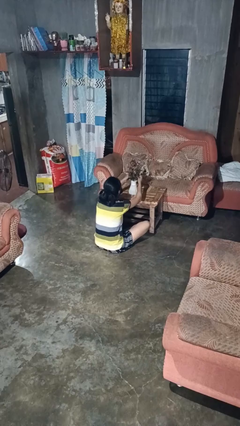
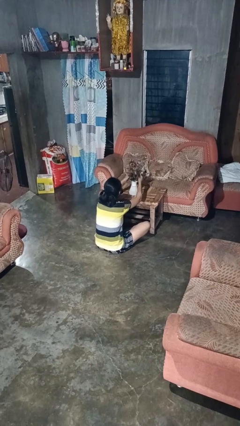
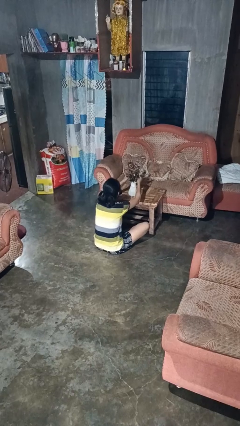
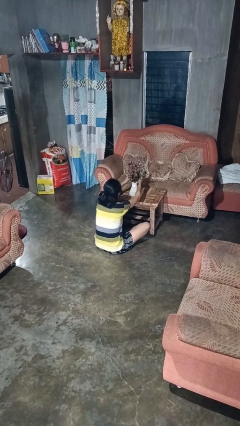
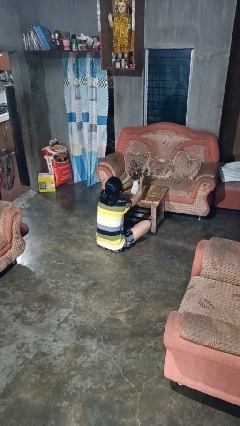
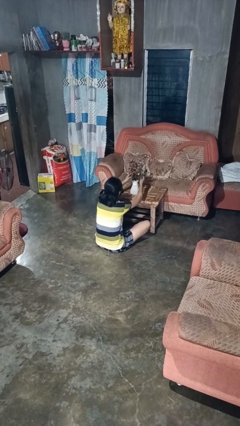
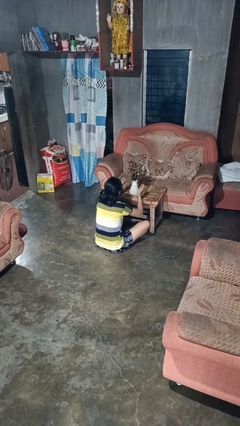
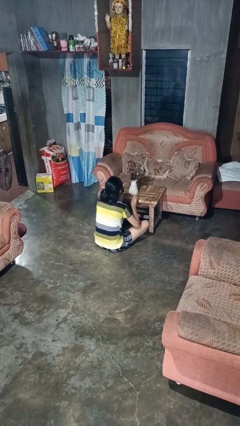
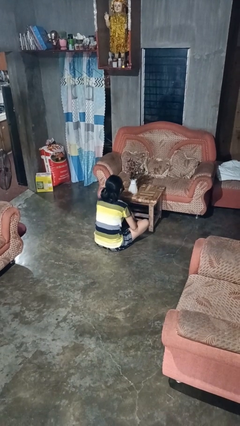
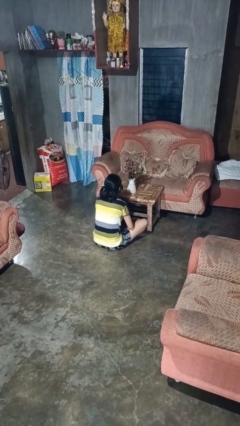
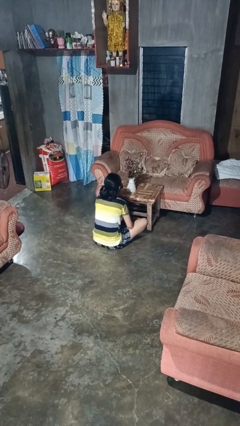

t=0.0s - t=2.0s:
person arranges flowers in vase

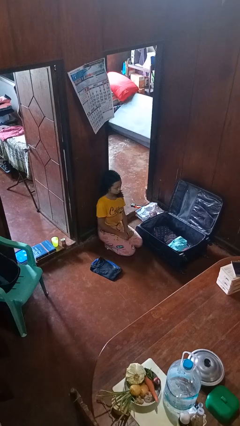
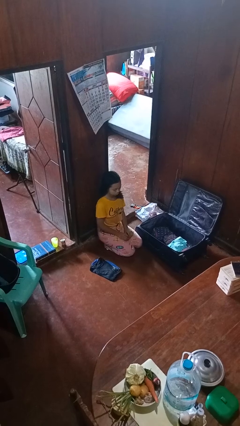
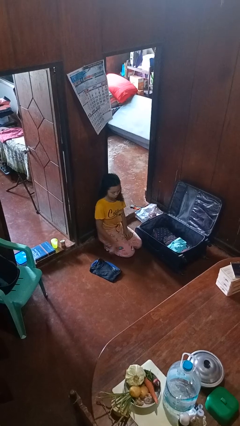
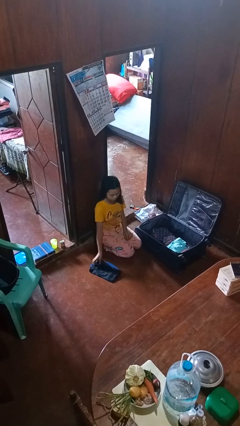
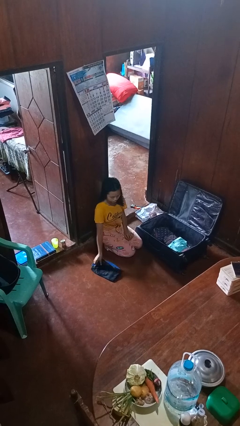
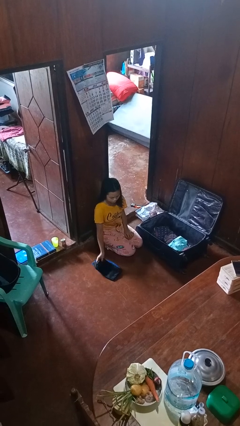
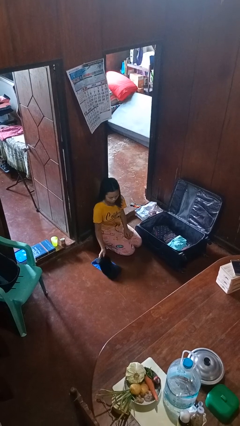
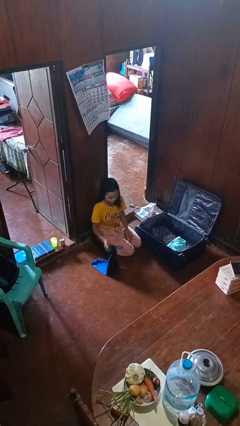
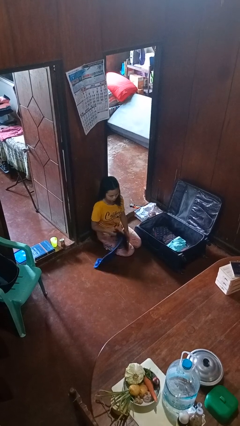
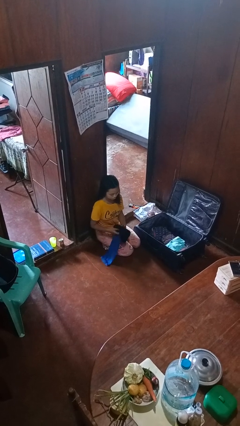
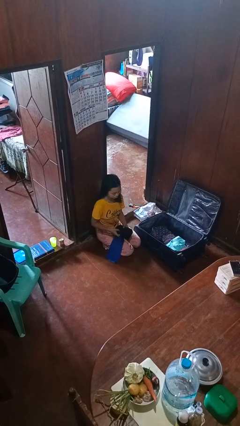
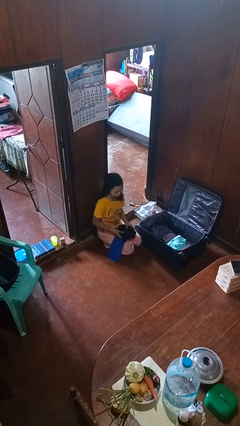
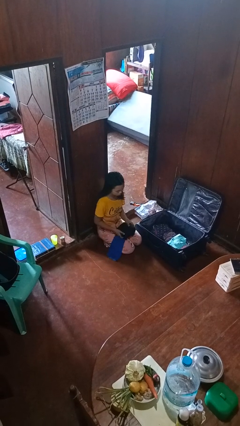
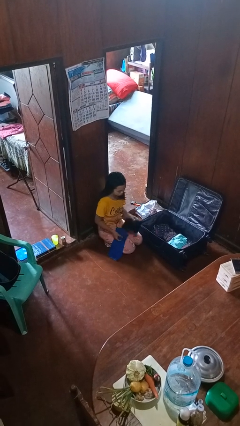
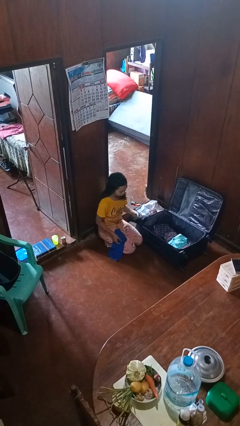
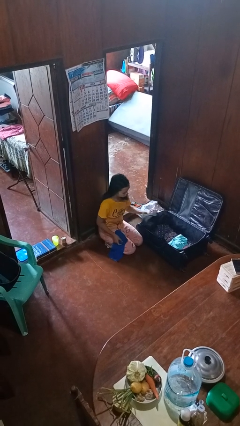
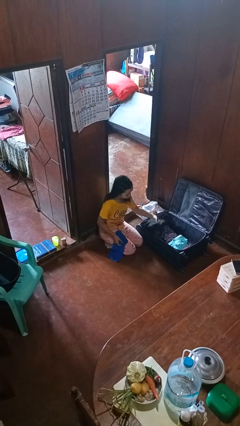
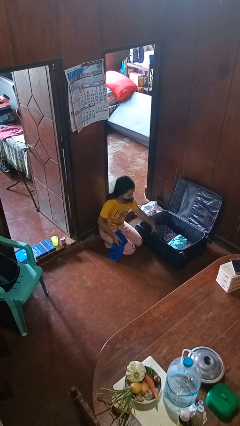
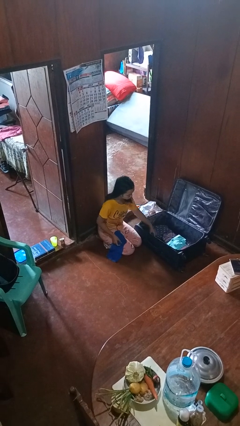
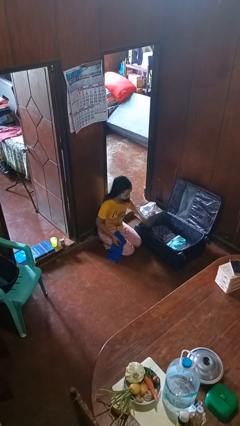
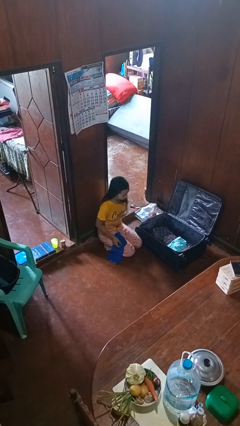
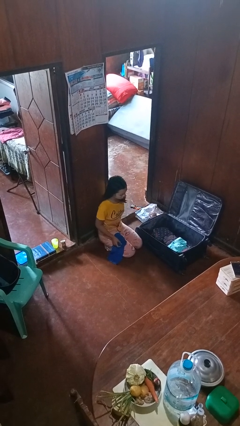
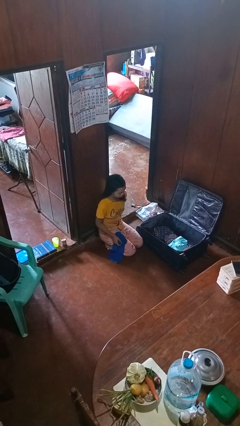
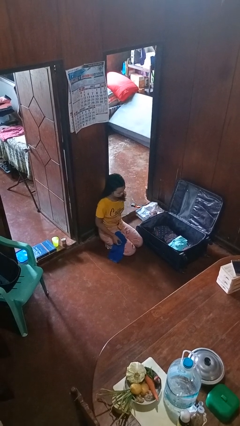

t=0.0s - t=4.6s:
person loads clothes into suitcase

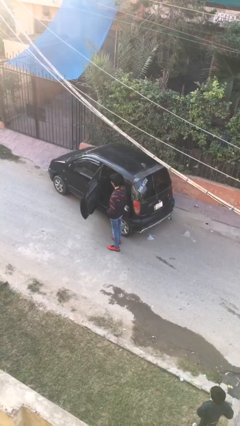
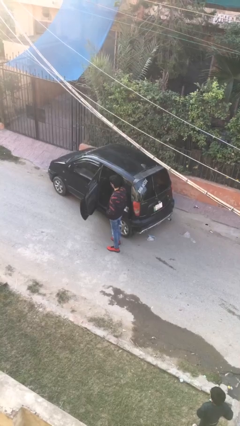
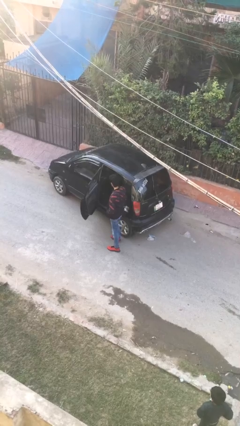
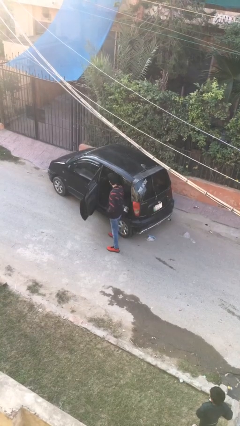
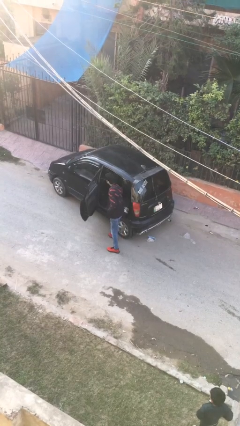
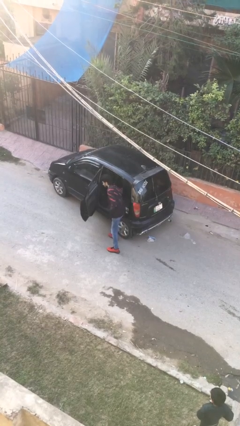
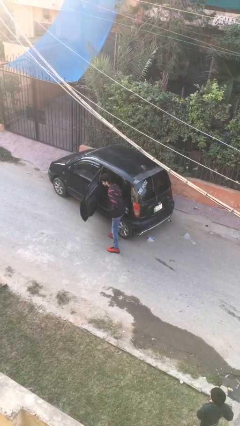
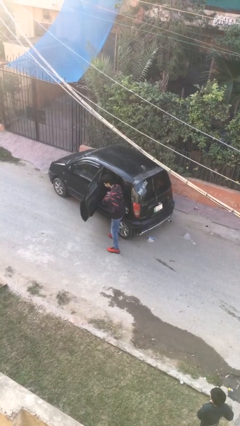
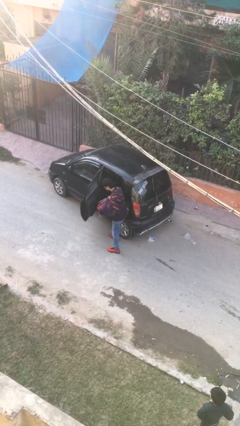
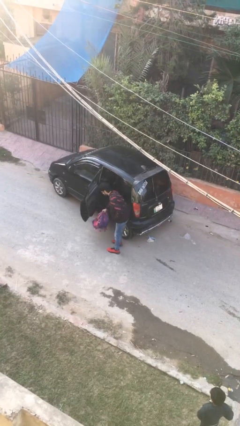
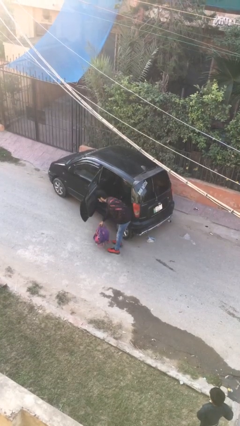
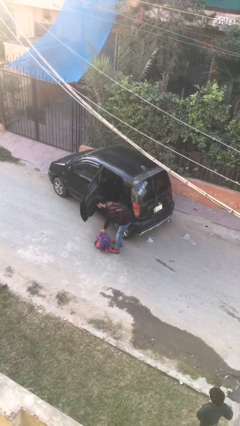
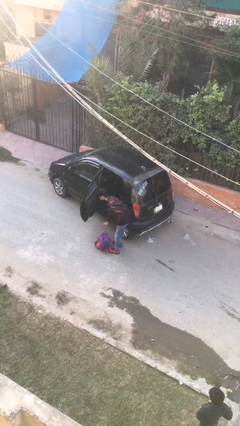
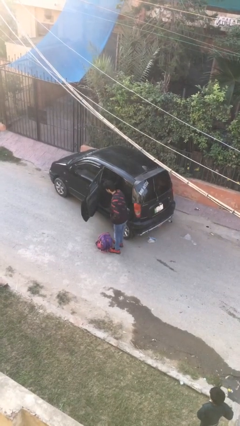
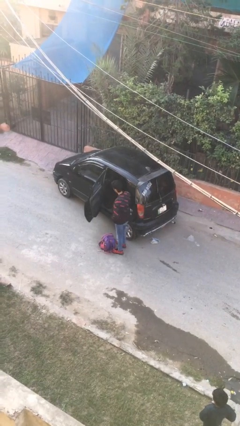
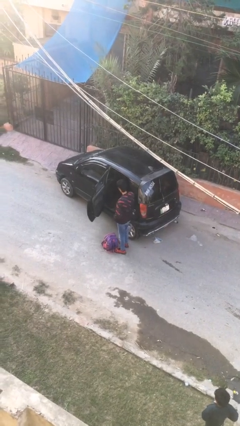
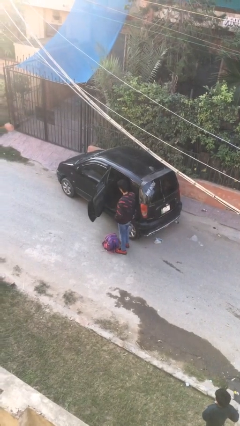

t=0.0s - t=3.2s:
person unloads car

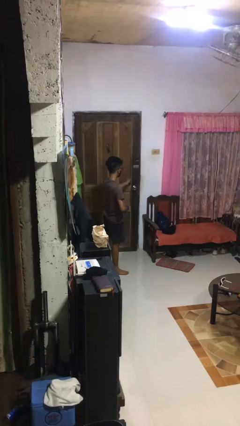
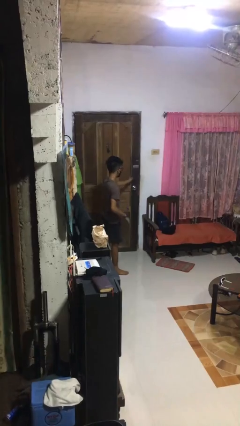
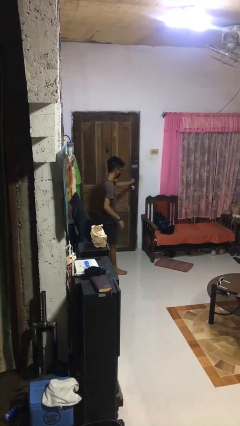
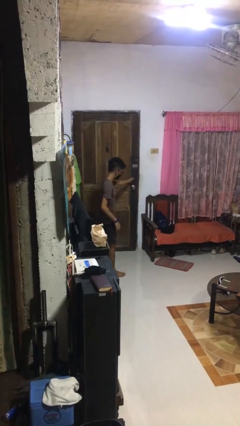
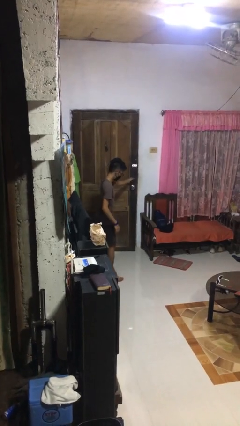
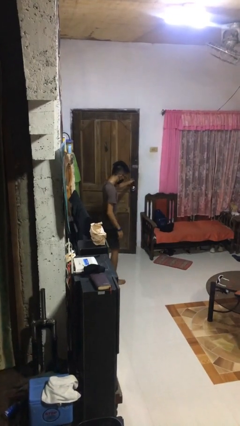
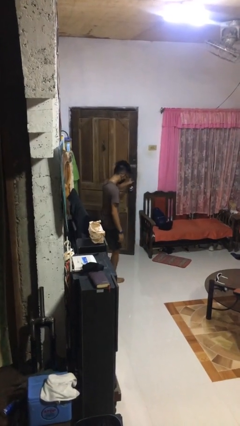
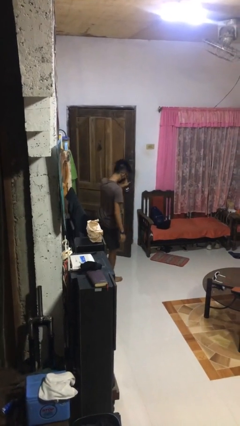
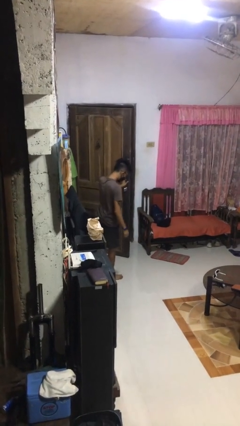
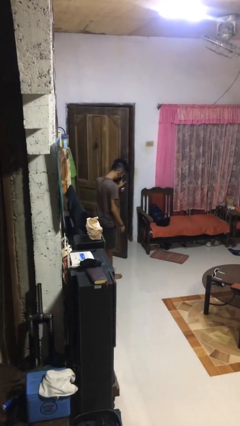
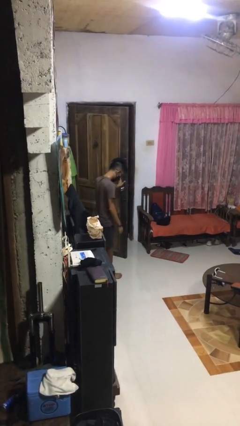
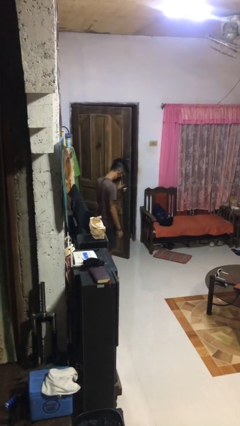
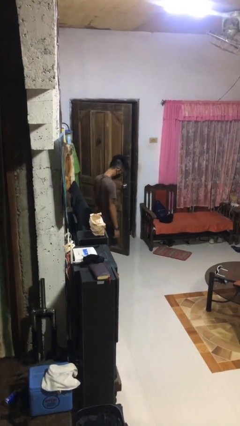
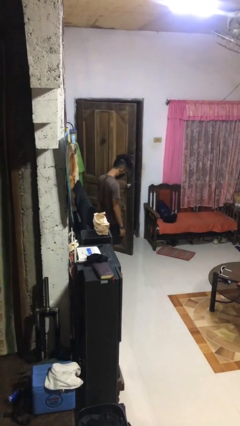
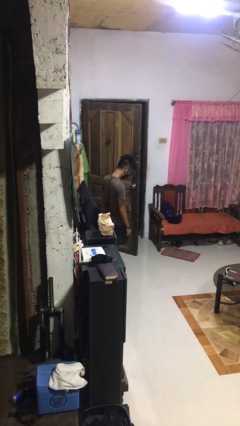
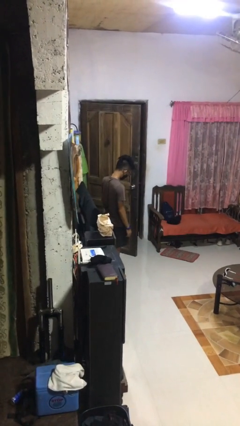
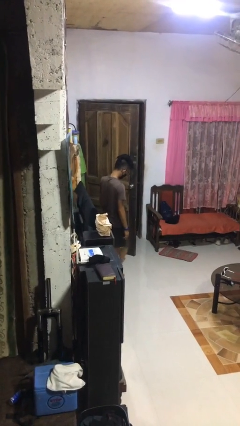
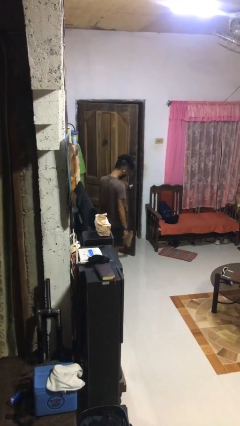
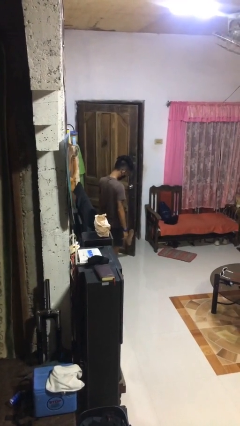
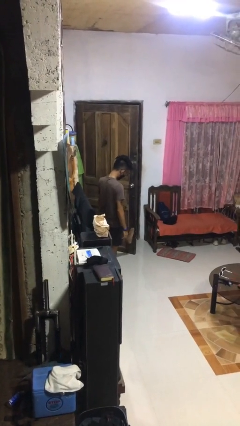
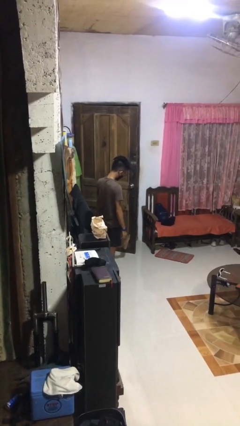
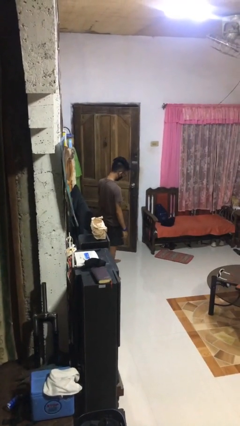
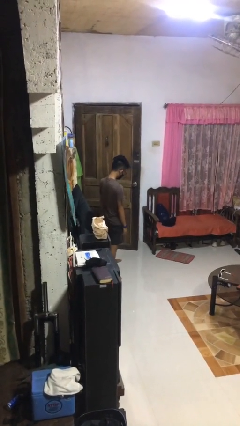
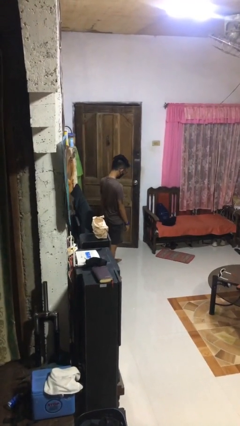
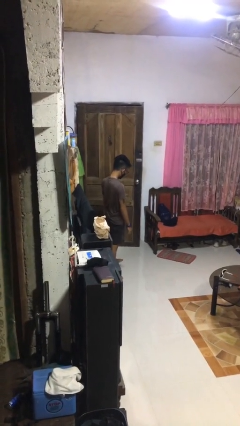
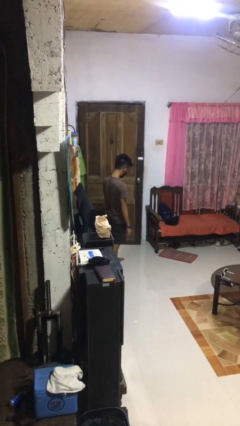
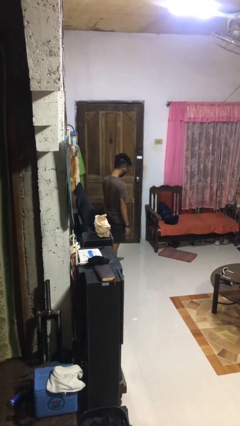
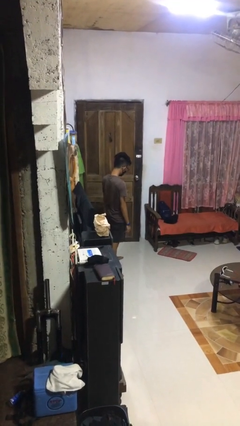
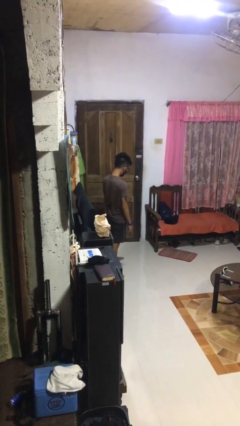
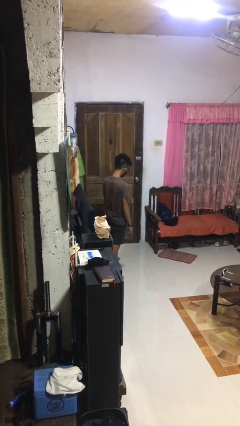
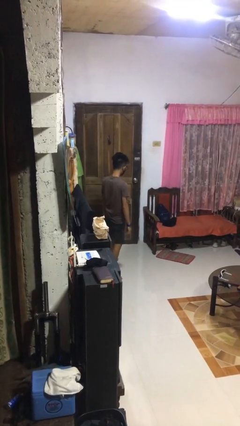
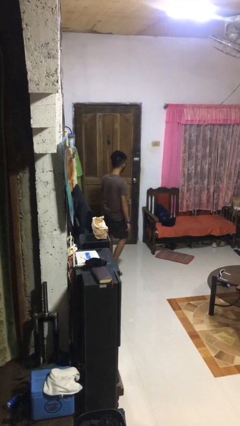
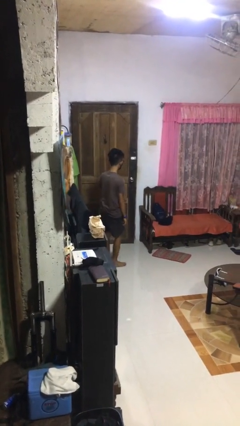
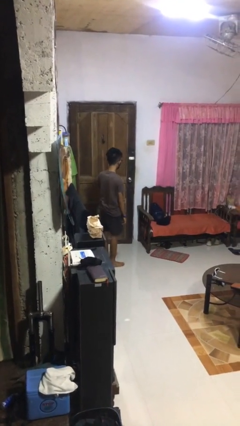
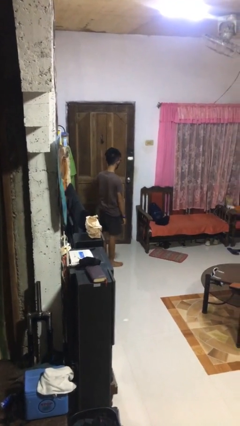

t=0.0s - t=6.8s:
person opens facility door

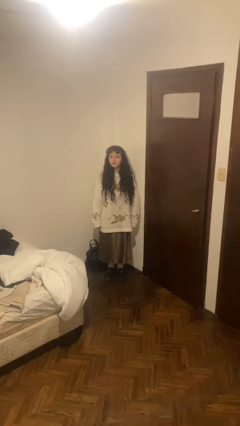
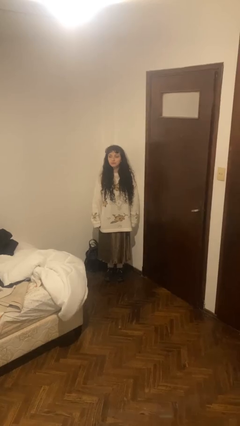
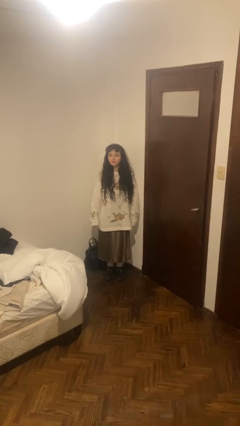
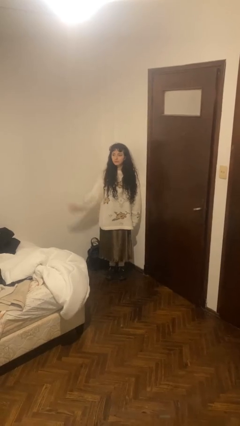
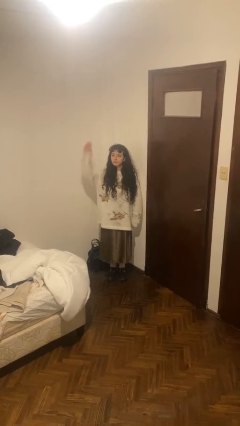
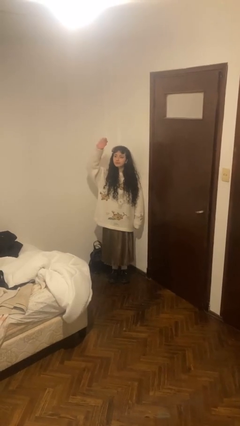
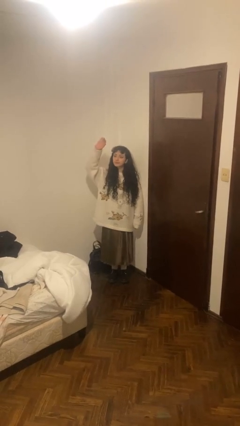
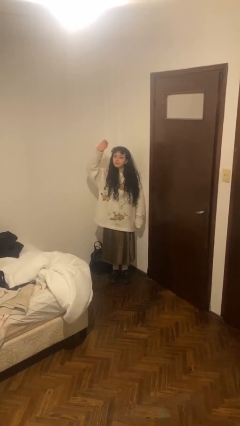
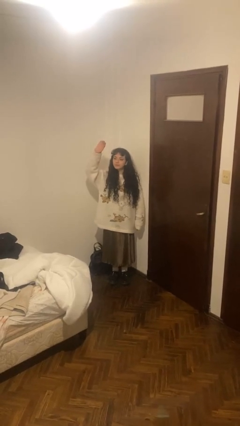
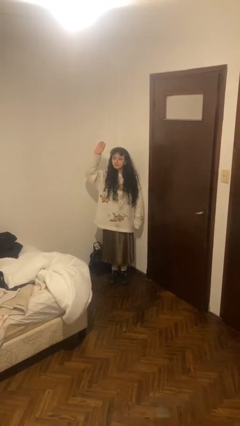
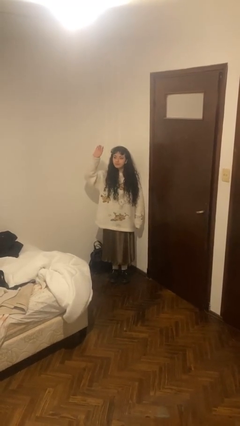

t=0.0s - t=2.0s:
person gestures raise hand
